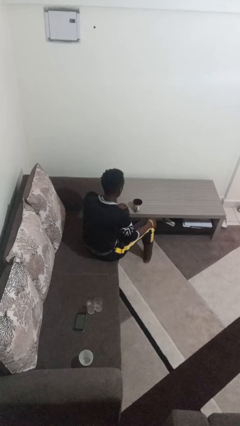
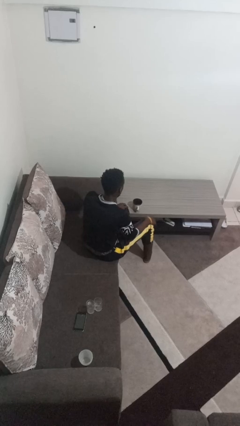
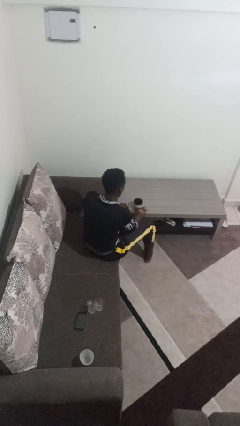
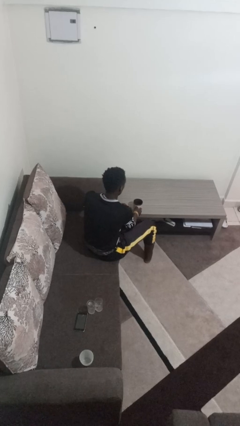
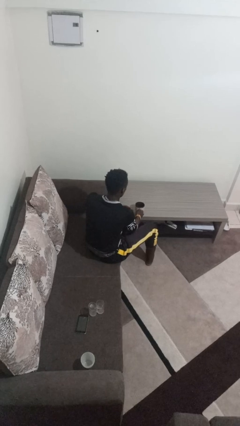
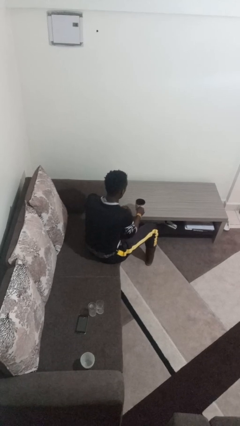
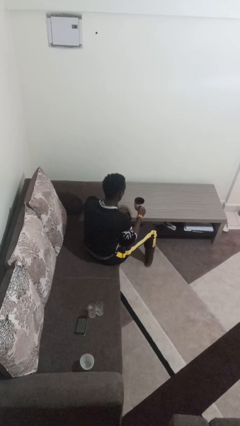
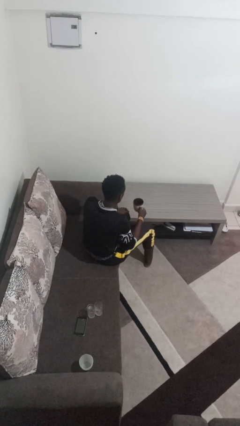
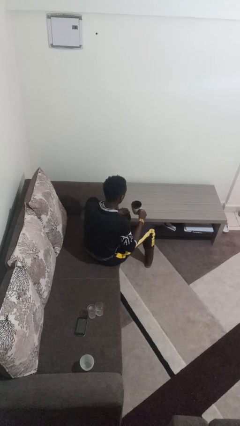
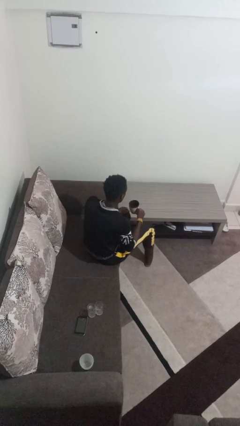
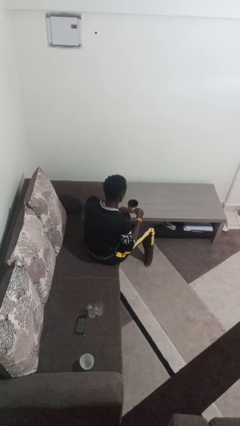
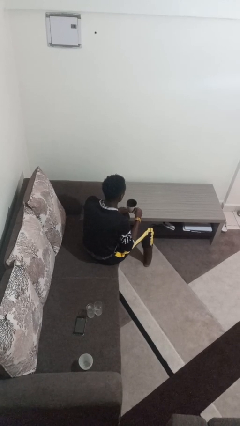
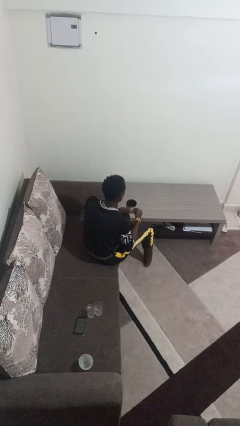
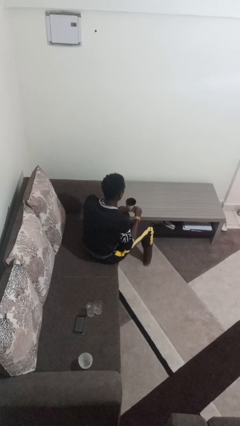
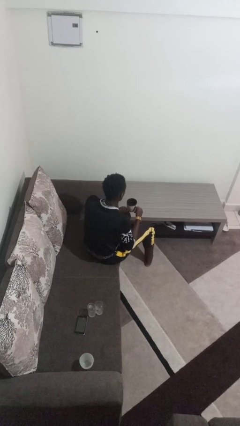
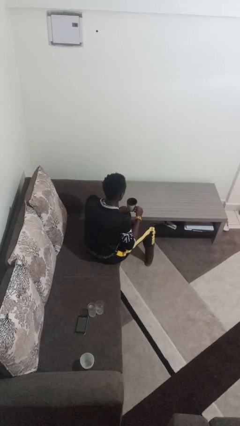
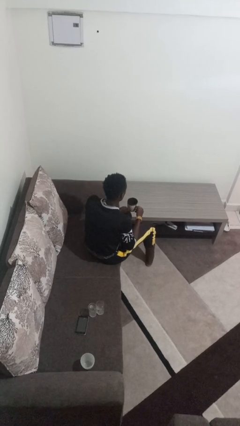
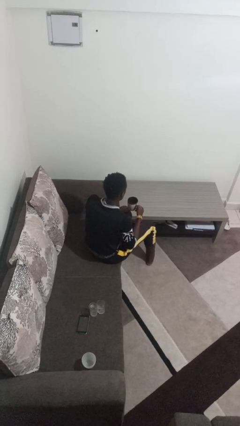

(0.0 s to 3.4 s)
person picks up object from table

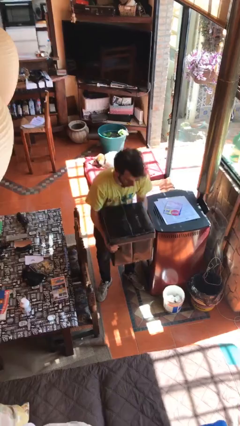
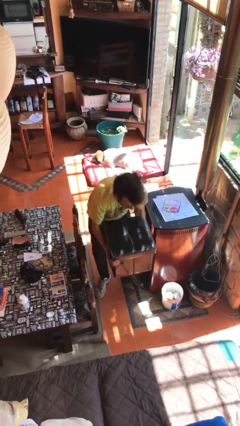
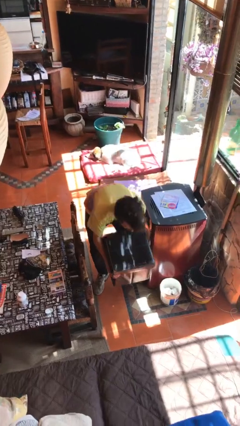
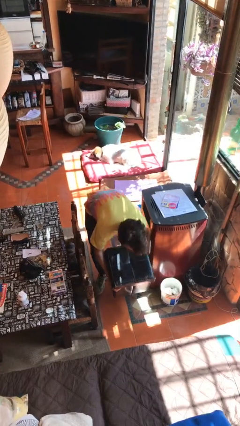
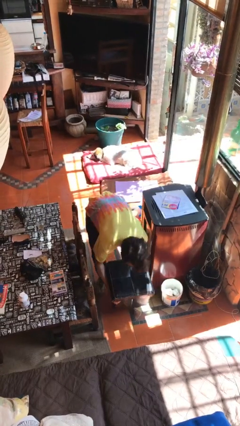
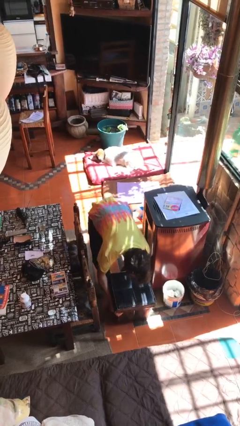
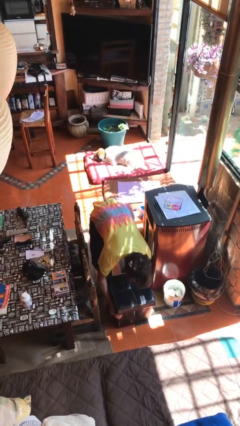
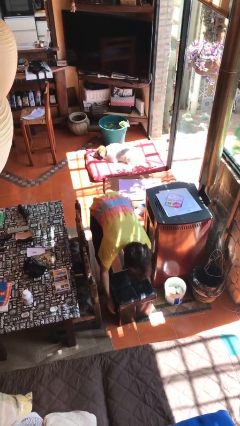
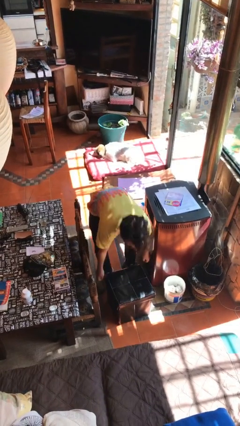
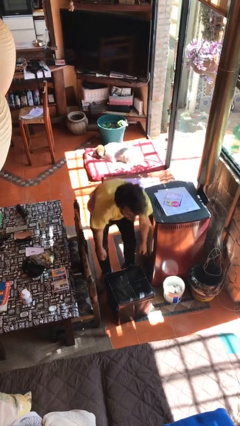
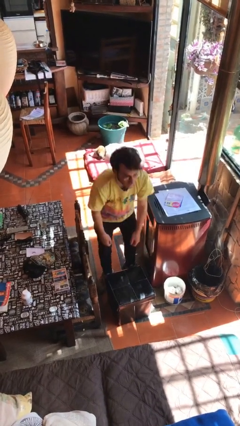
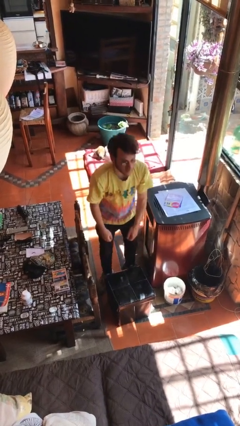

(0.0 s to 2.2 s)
person puts down object on floor

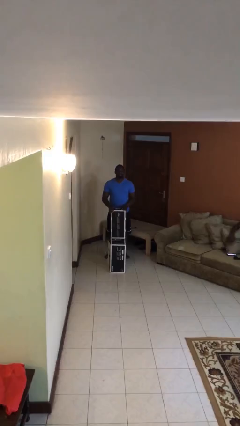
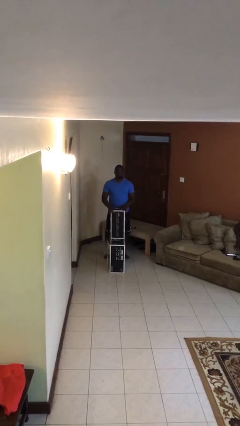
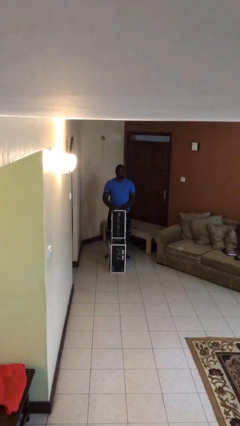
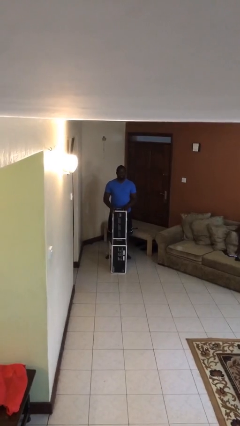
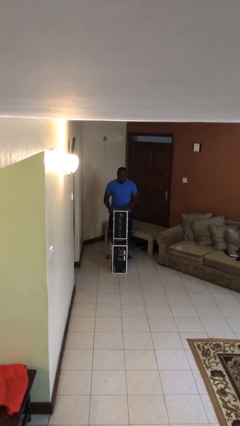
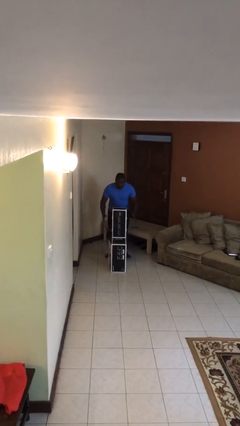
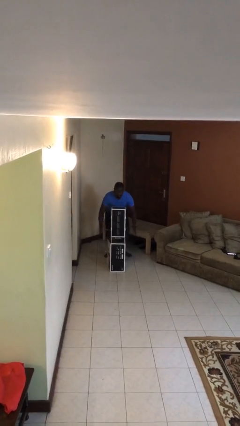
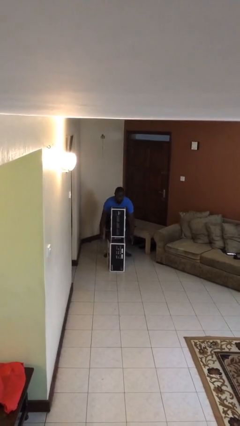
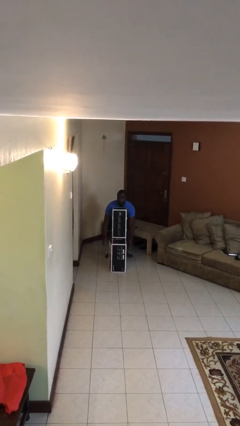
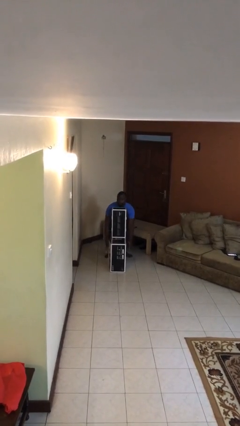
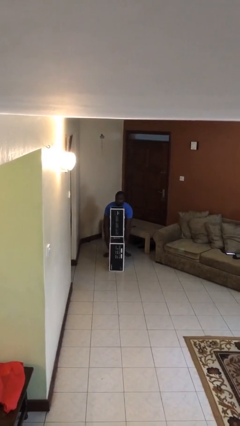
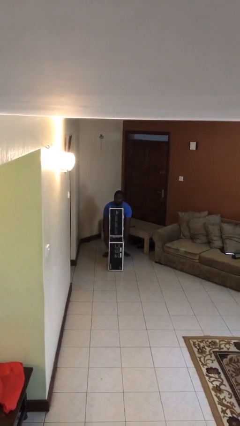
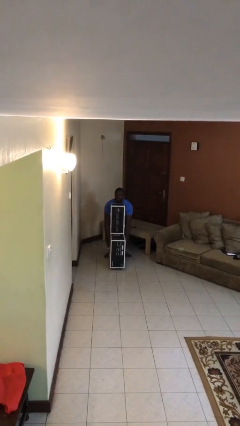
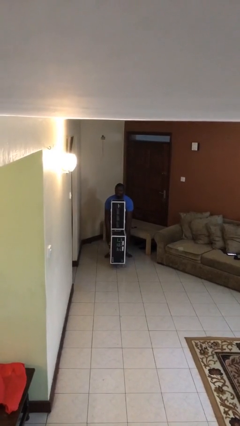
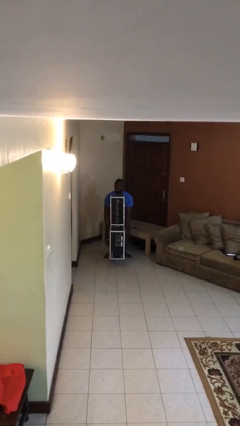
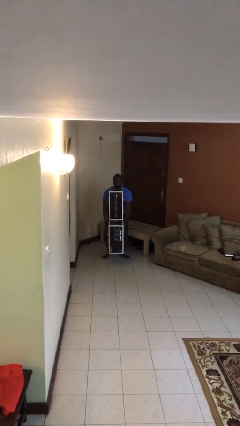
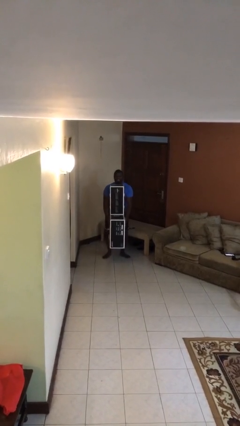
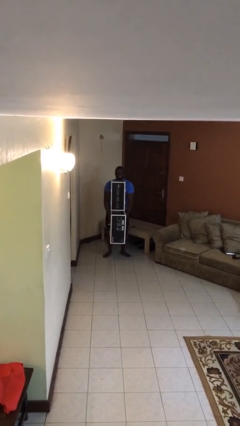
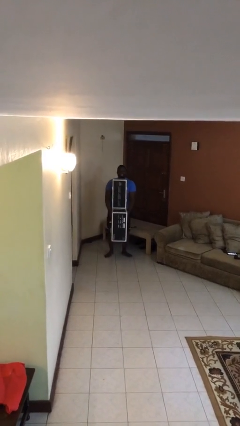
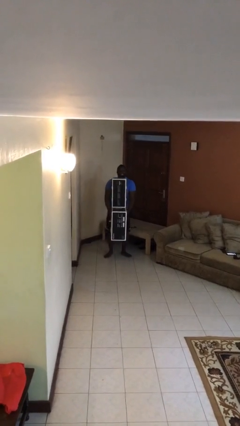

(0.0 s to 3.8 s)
person picks up object from floor

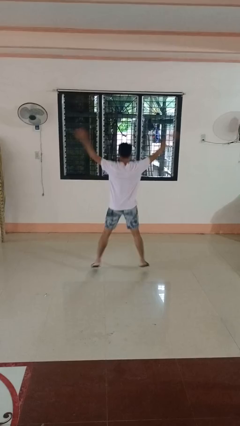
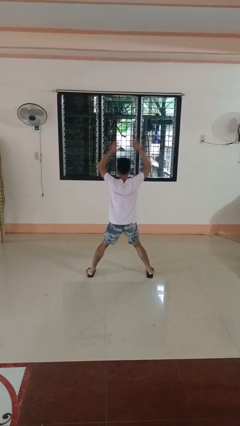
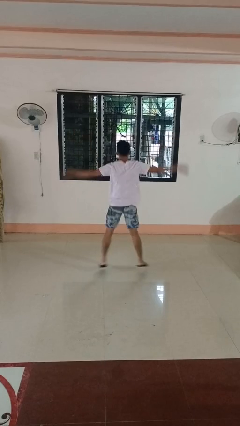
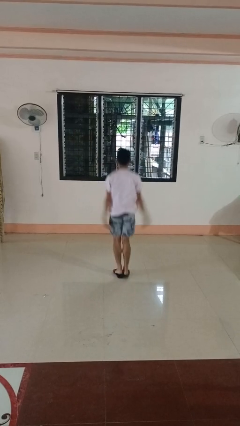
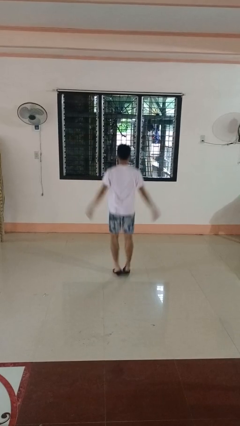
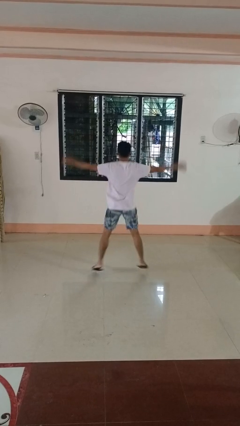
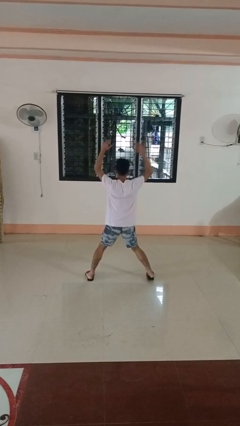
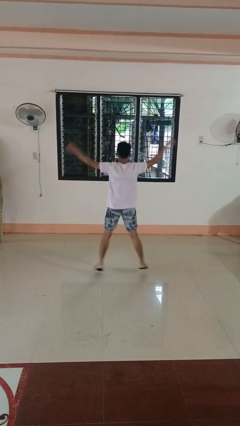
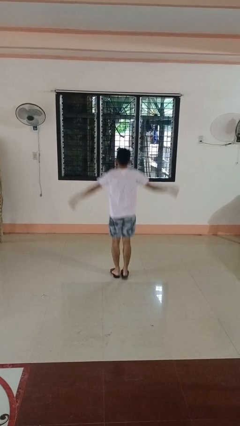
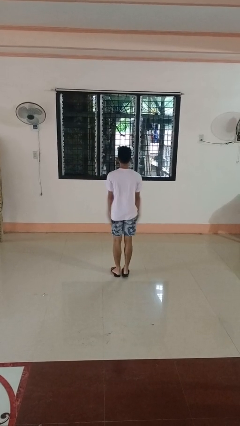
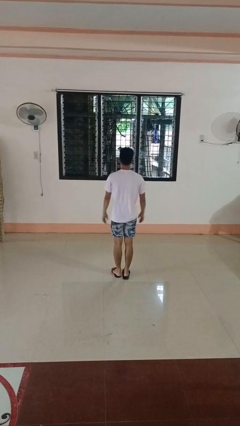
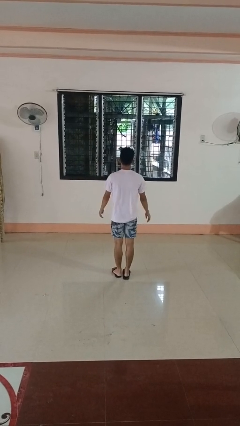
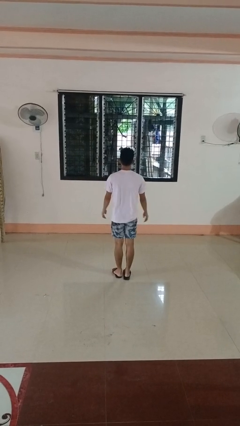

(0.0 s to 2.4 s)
person exercises with jumping jacks

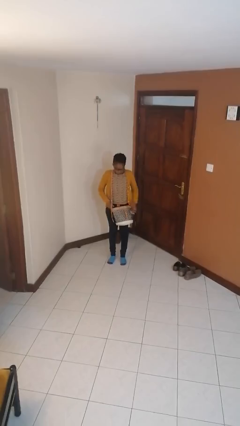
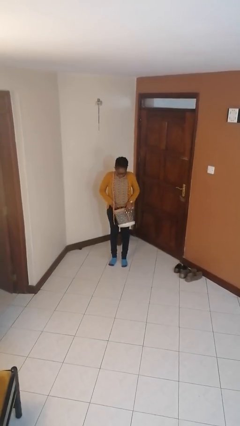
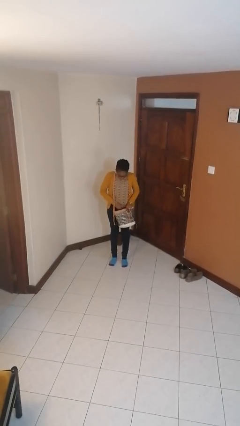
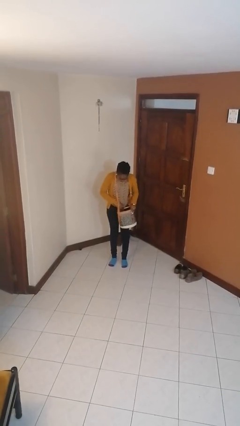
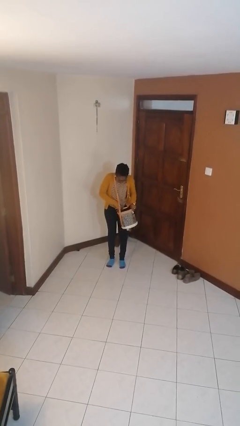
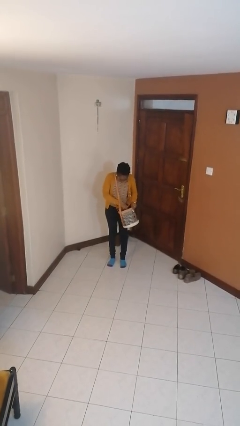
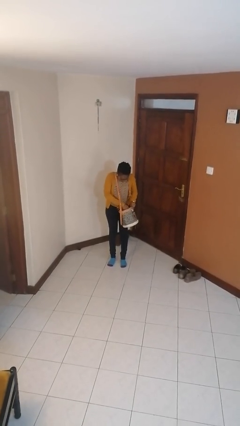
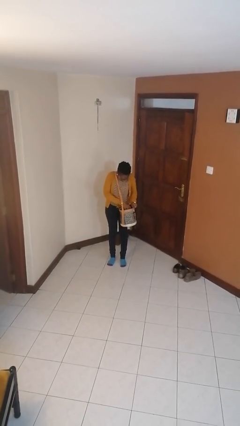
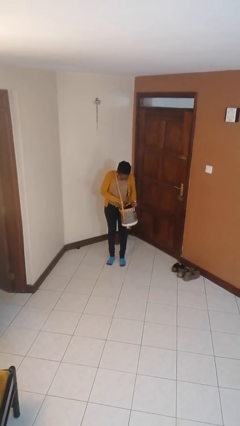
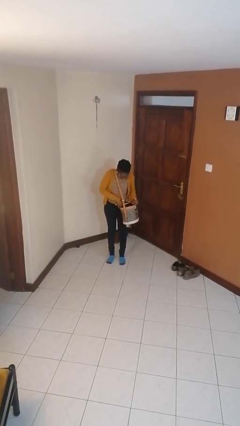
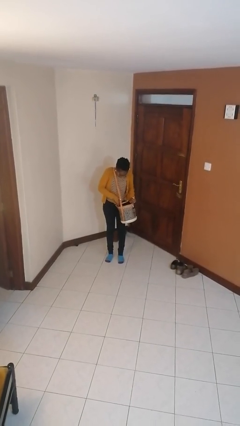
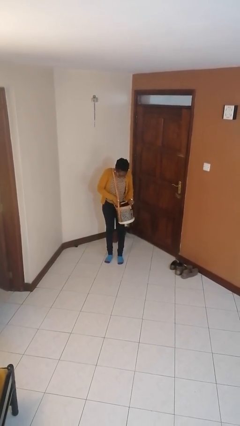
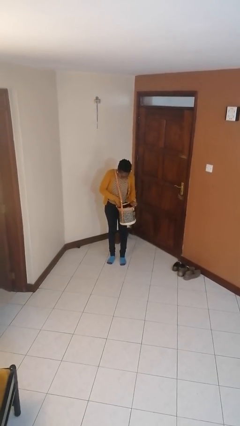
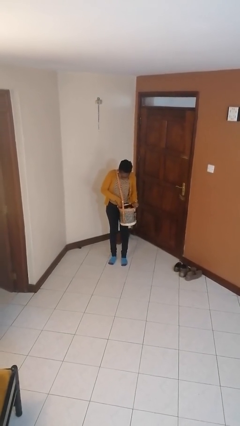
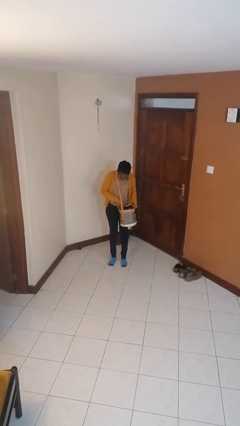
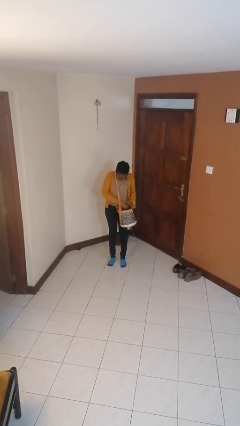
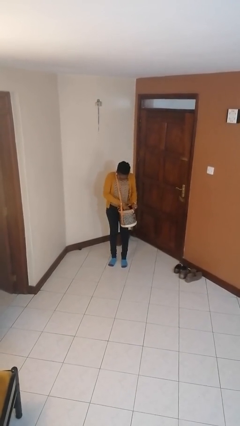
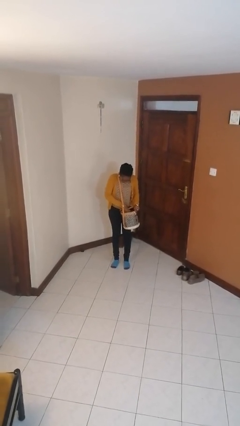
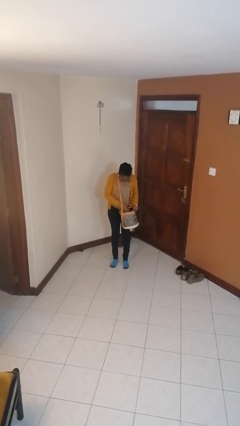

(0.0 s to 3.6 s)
person searches in purse

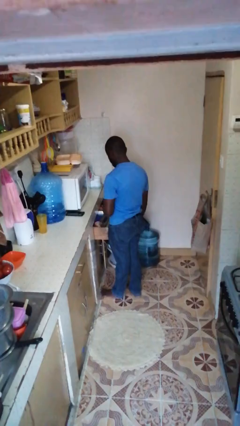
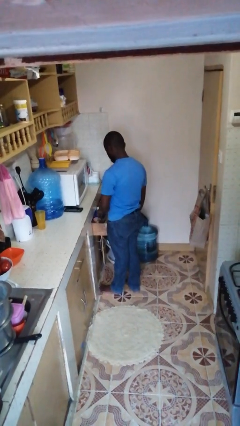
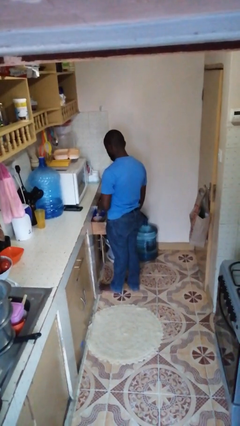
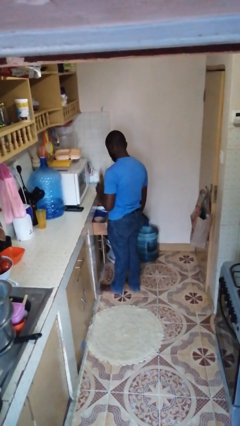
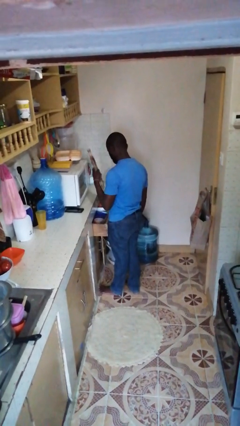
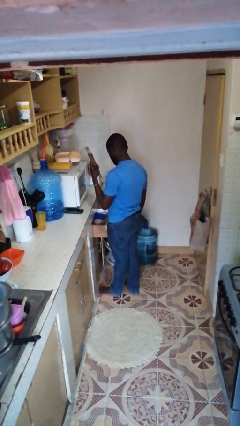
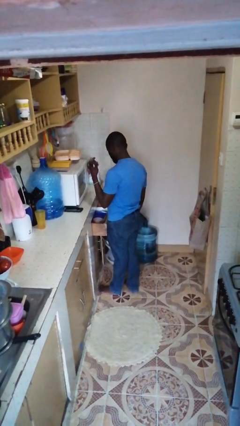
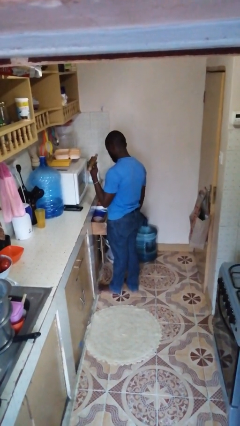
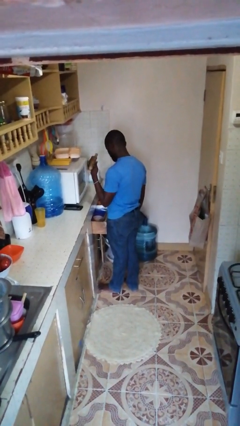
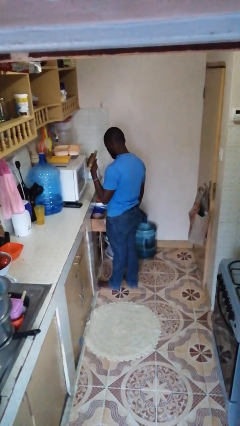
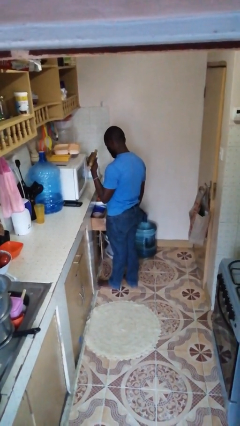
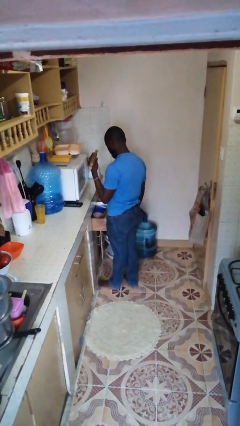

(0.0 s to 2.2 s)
person takes object from kitchen drawer
